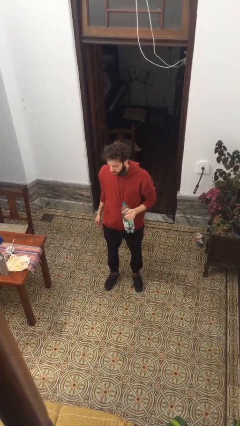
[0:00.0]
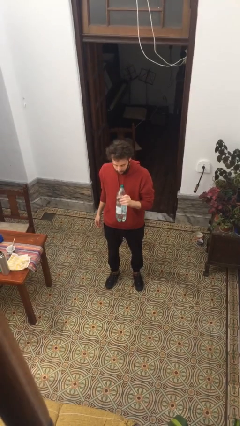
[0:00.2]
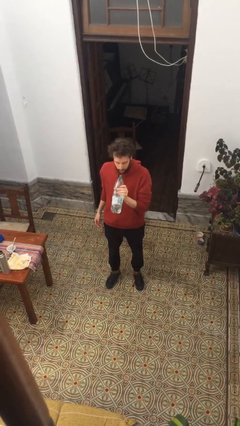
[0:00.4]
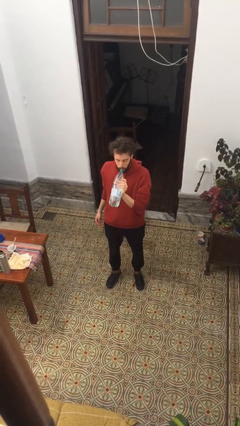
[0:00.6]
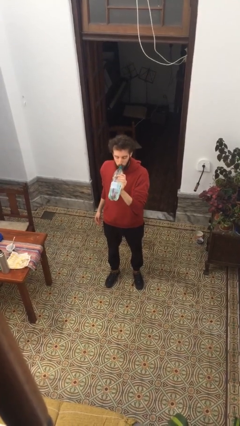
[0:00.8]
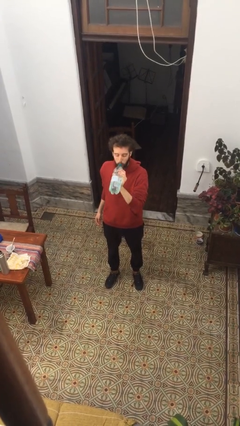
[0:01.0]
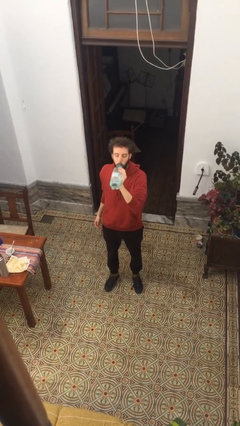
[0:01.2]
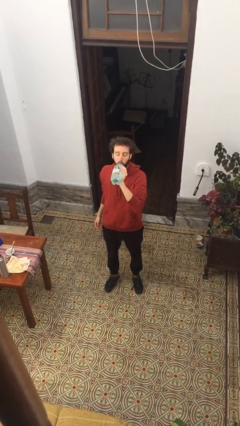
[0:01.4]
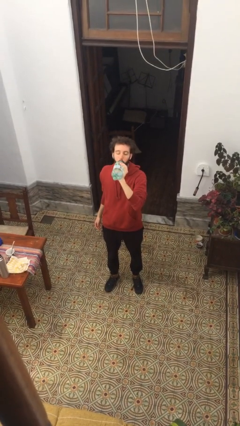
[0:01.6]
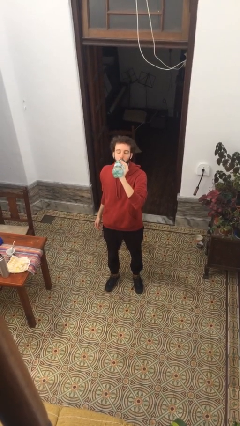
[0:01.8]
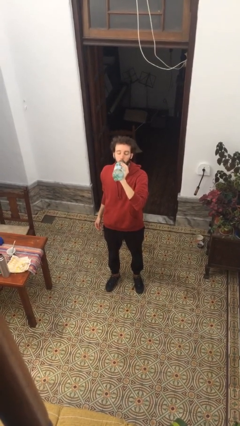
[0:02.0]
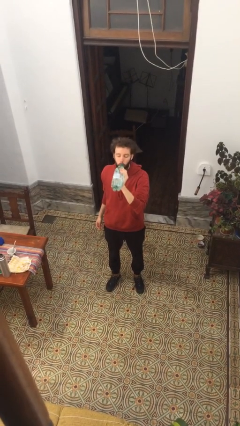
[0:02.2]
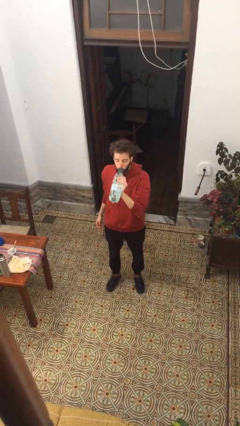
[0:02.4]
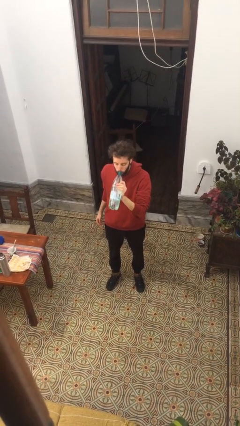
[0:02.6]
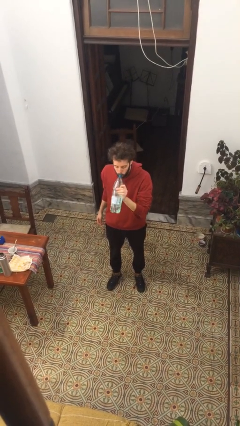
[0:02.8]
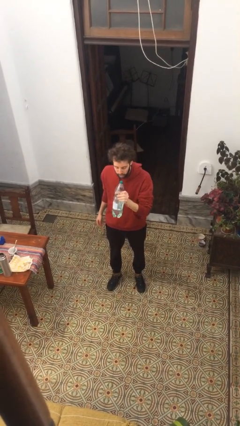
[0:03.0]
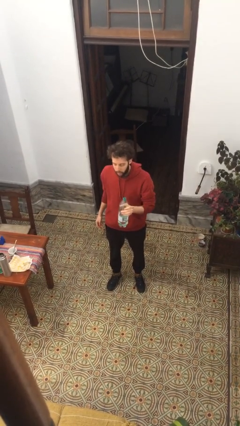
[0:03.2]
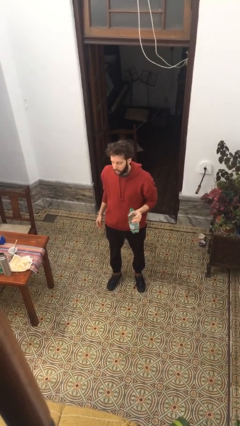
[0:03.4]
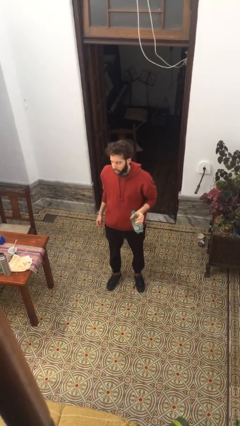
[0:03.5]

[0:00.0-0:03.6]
person drinks from bottle

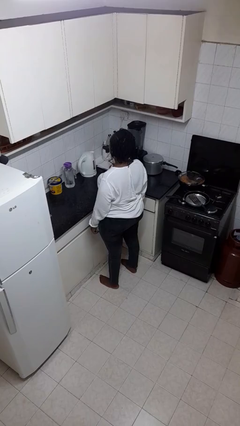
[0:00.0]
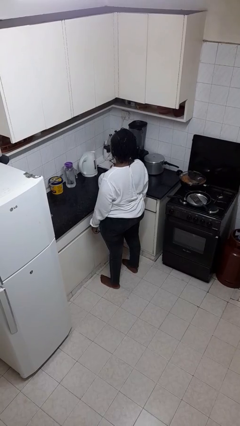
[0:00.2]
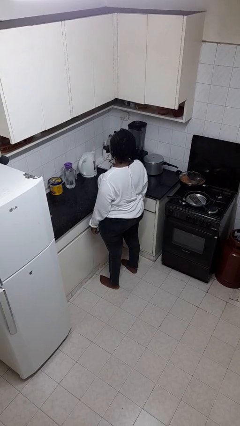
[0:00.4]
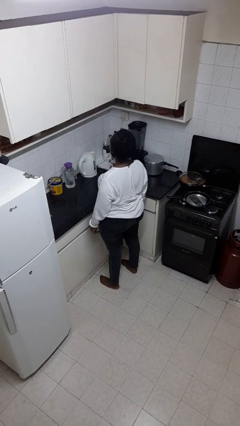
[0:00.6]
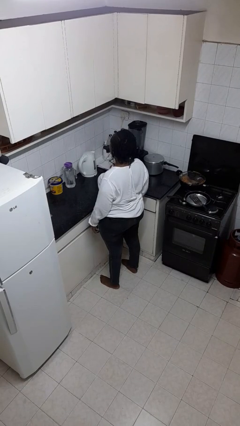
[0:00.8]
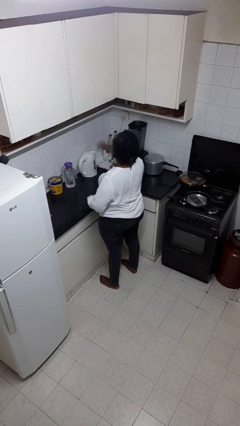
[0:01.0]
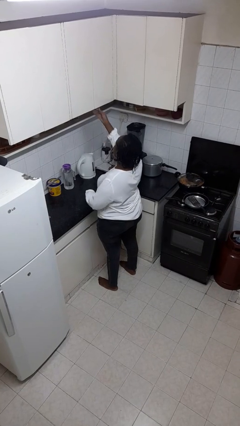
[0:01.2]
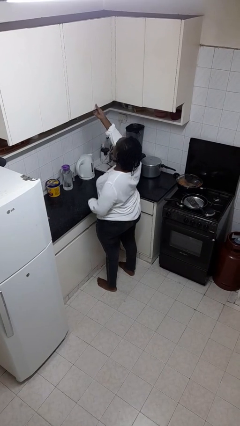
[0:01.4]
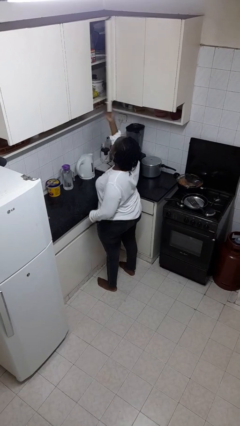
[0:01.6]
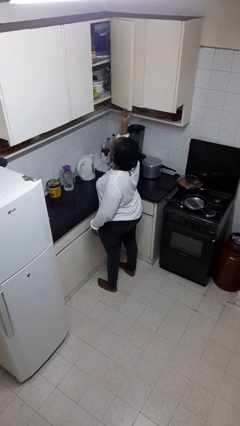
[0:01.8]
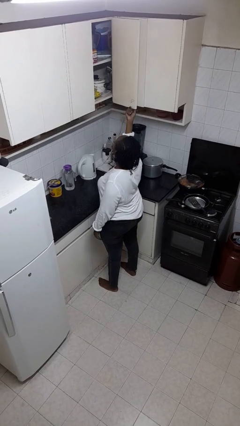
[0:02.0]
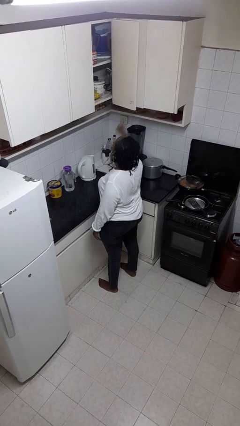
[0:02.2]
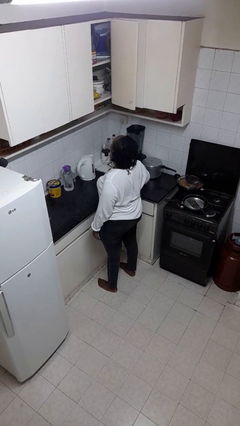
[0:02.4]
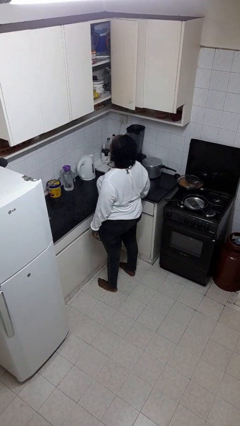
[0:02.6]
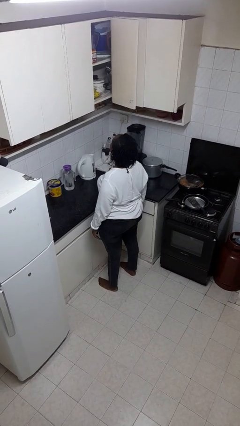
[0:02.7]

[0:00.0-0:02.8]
person opens cabinet

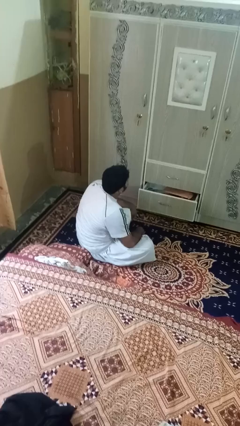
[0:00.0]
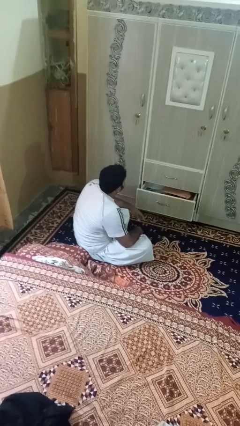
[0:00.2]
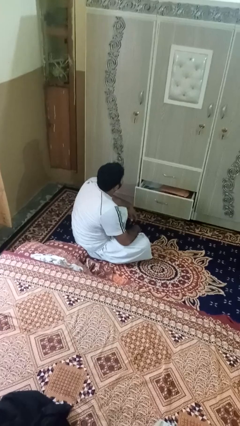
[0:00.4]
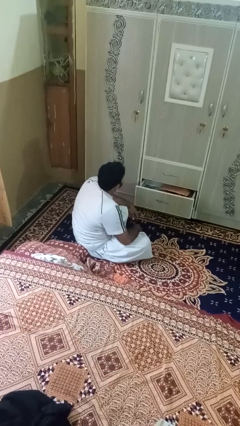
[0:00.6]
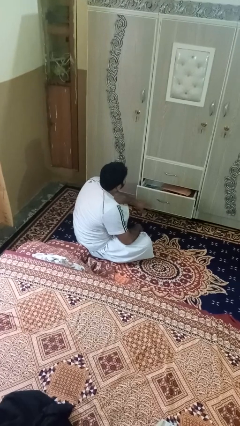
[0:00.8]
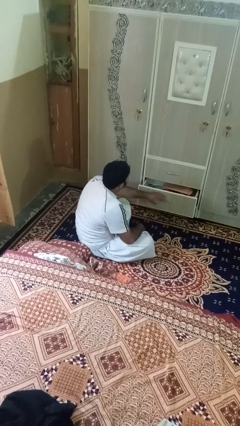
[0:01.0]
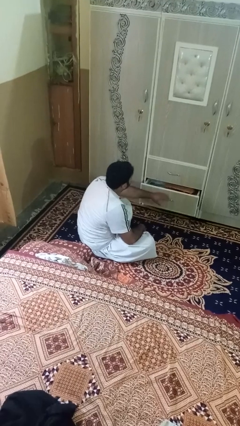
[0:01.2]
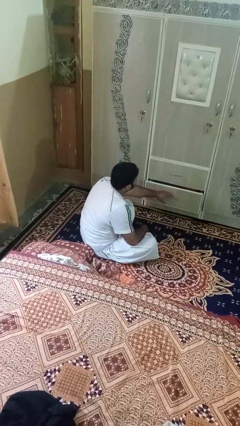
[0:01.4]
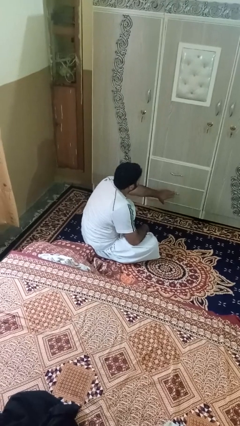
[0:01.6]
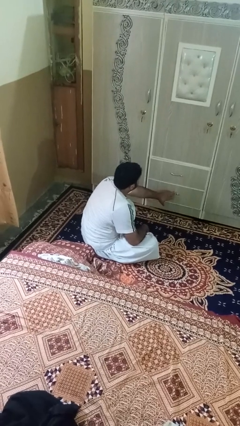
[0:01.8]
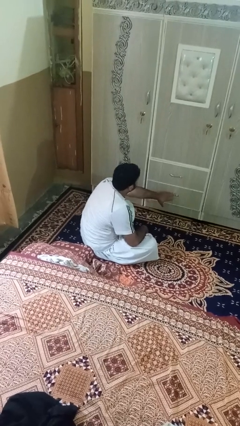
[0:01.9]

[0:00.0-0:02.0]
person closes dresser drawer

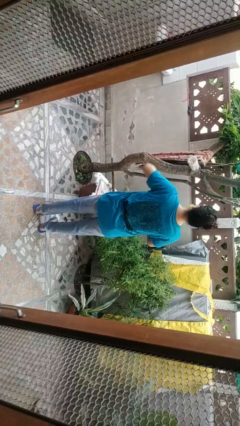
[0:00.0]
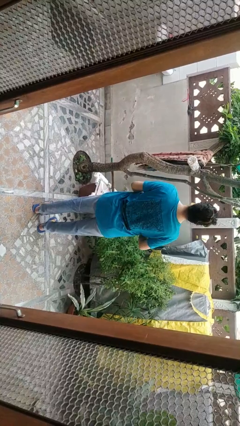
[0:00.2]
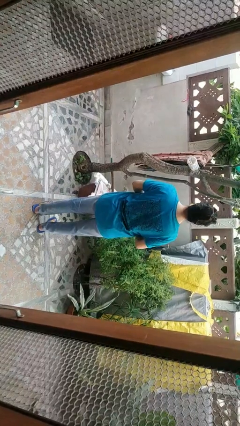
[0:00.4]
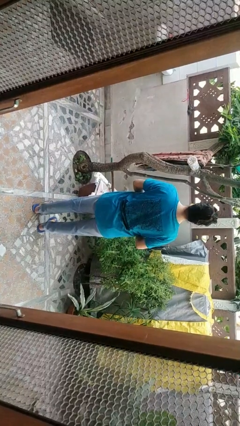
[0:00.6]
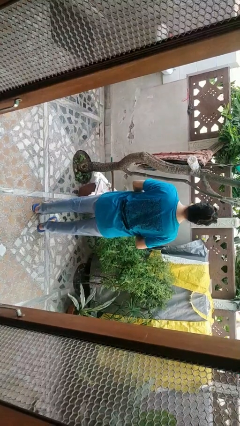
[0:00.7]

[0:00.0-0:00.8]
person applies deodorant

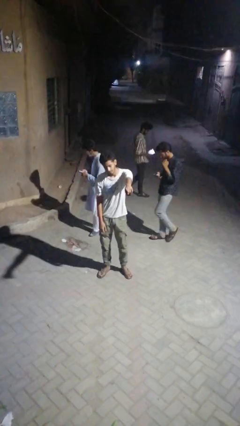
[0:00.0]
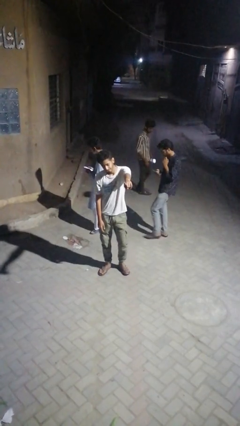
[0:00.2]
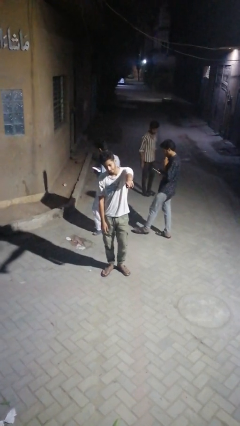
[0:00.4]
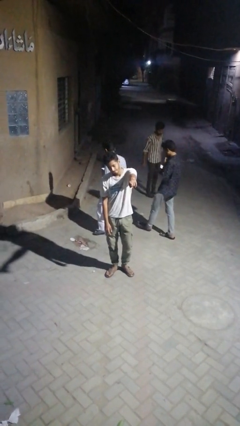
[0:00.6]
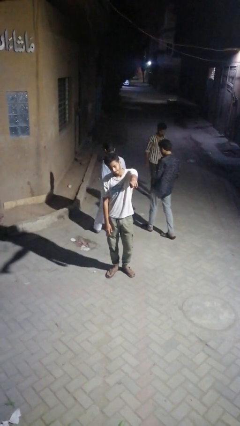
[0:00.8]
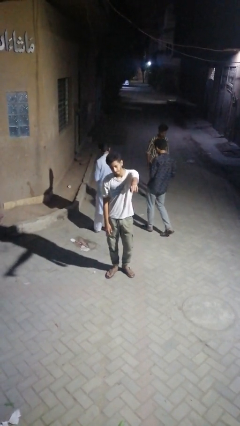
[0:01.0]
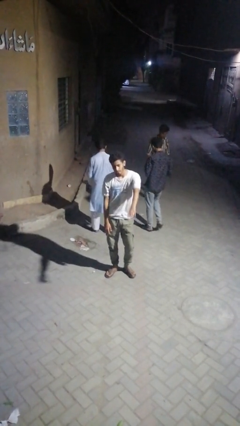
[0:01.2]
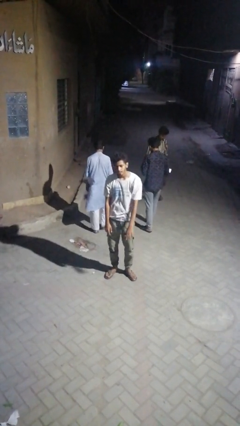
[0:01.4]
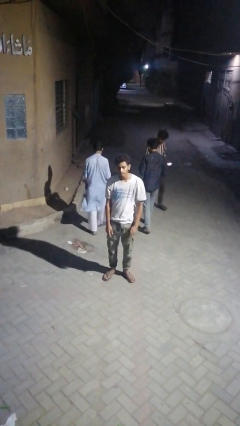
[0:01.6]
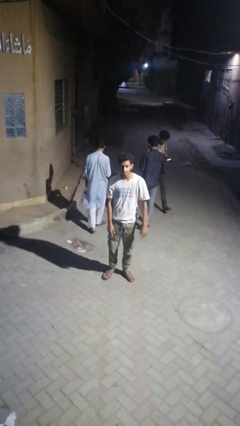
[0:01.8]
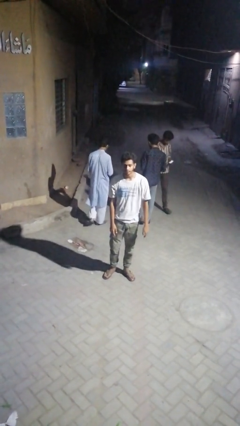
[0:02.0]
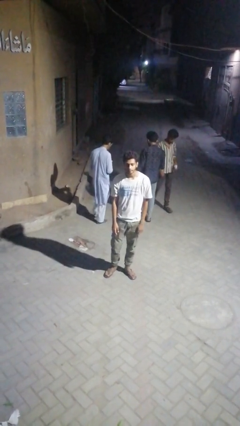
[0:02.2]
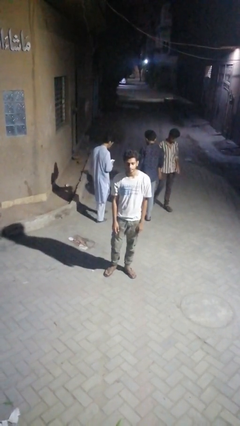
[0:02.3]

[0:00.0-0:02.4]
person points at person

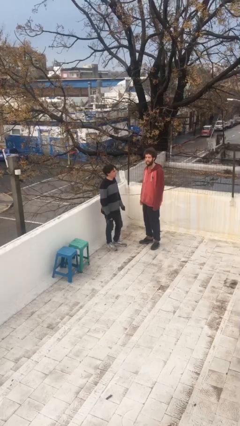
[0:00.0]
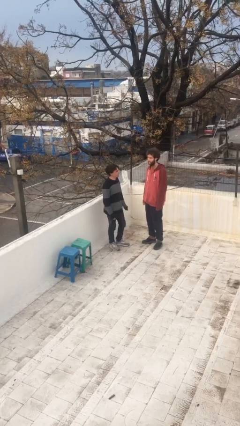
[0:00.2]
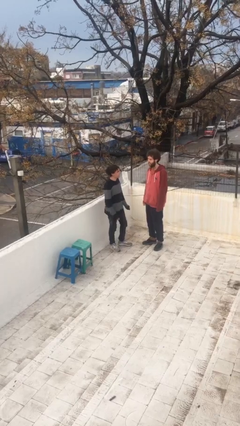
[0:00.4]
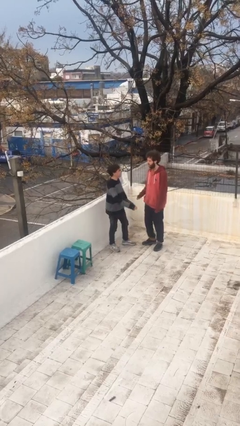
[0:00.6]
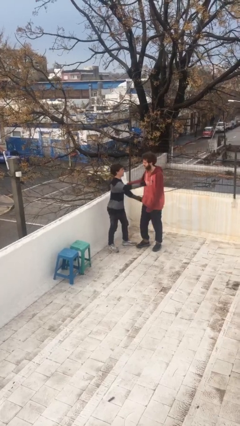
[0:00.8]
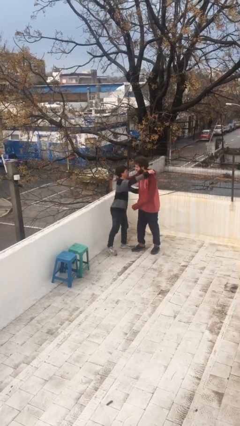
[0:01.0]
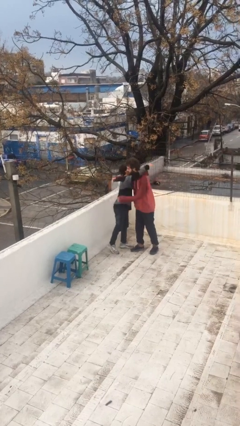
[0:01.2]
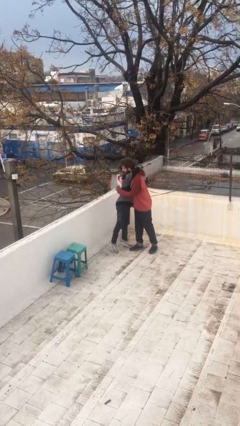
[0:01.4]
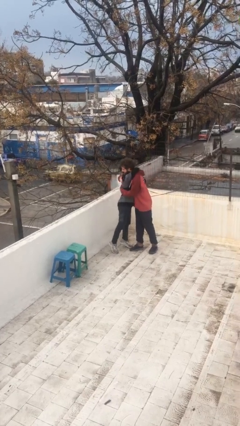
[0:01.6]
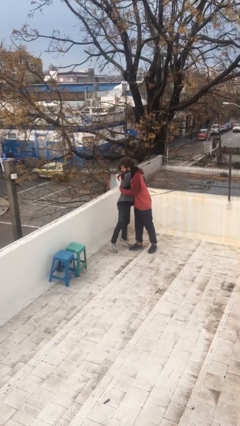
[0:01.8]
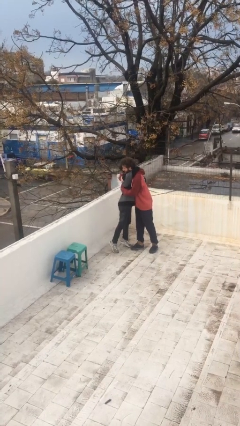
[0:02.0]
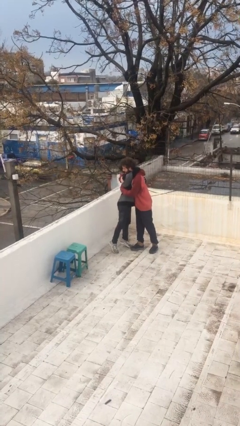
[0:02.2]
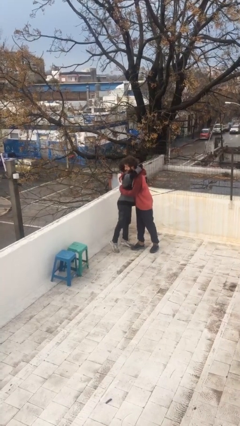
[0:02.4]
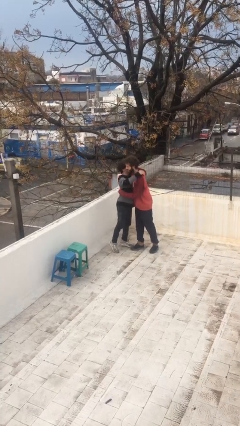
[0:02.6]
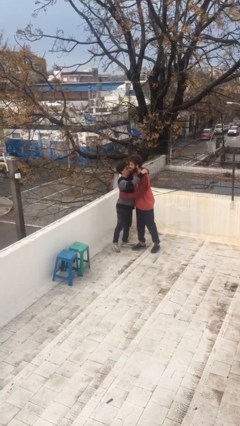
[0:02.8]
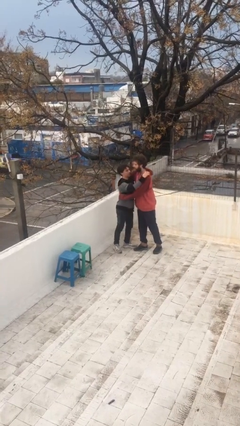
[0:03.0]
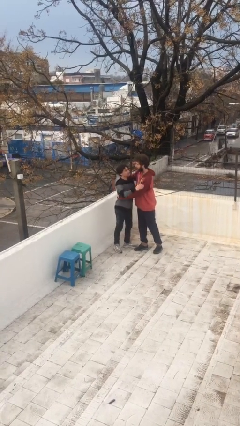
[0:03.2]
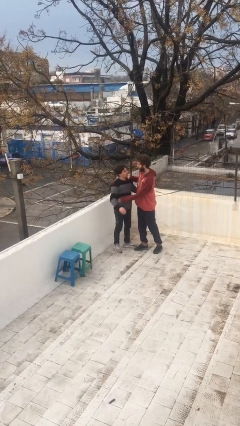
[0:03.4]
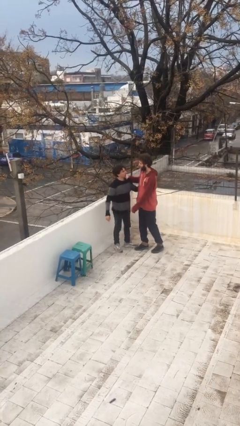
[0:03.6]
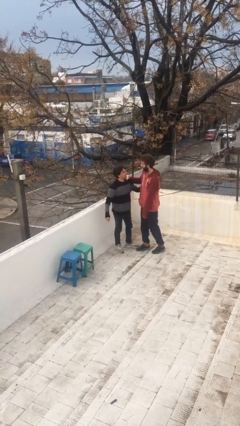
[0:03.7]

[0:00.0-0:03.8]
person embraces person

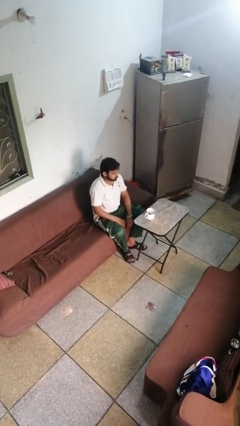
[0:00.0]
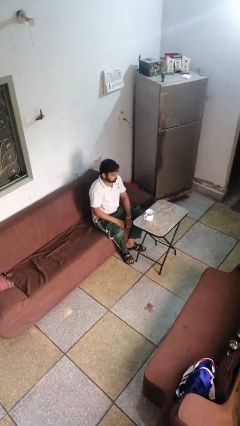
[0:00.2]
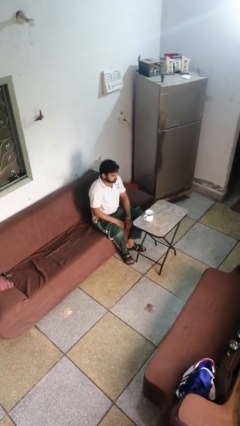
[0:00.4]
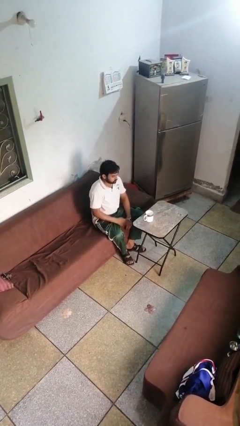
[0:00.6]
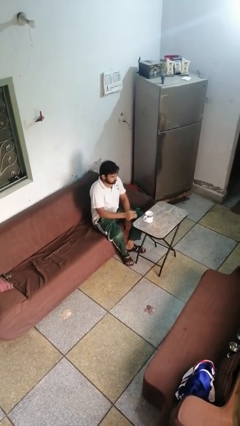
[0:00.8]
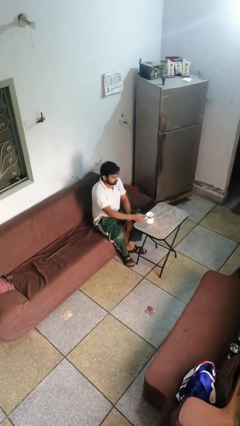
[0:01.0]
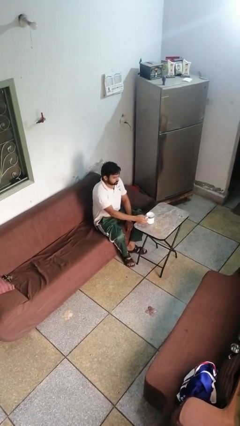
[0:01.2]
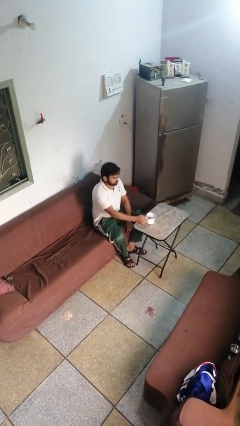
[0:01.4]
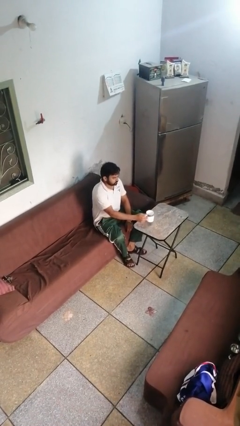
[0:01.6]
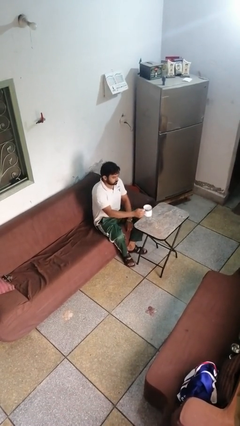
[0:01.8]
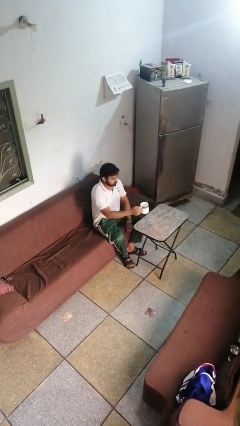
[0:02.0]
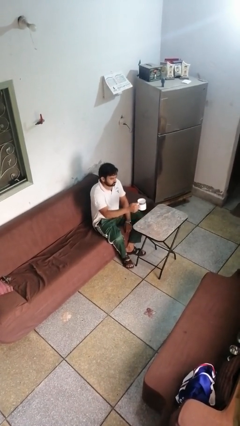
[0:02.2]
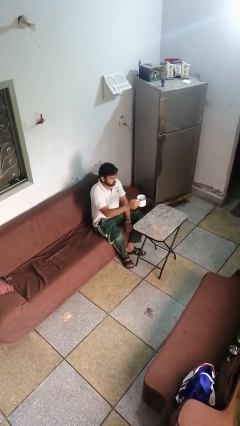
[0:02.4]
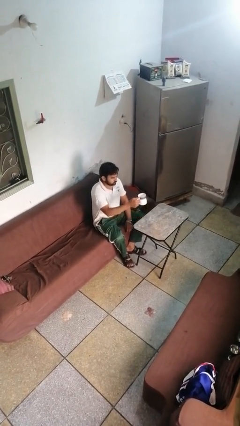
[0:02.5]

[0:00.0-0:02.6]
person picks up object from table
